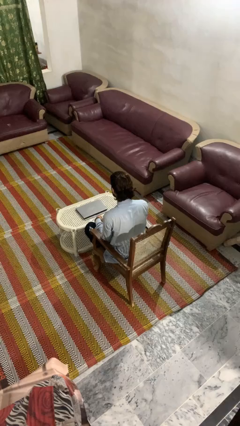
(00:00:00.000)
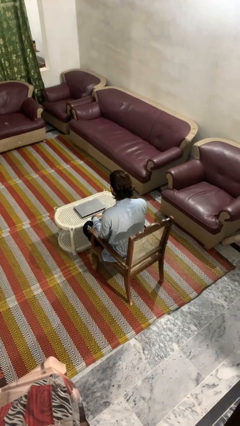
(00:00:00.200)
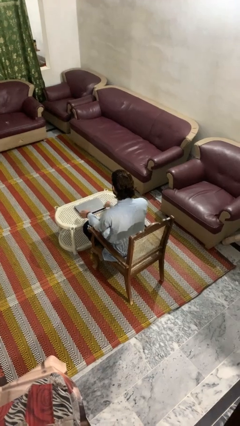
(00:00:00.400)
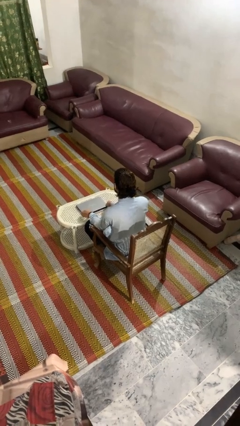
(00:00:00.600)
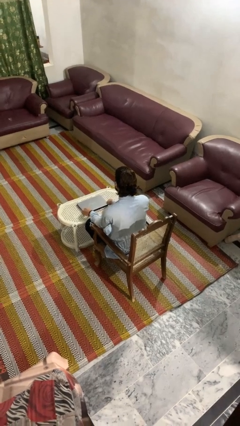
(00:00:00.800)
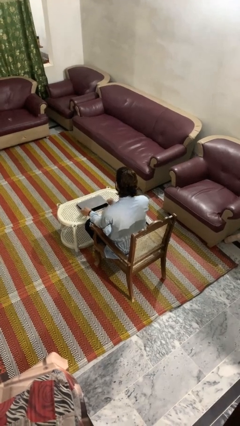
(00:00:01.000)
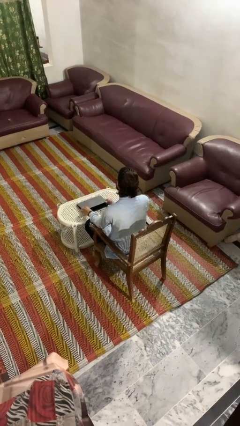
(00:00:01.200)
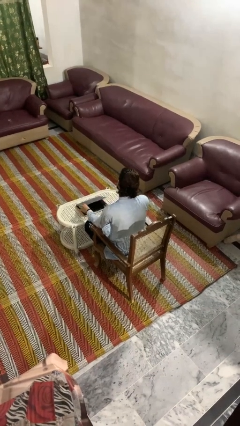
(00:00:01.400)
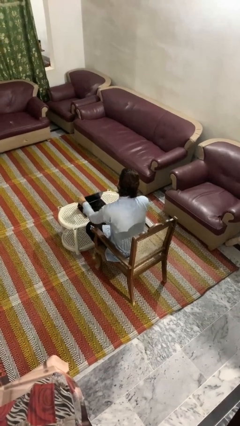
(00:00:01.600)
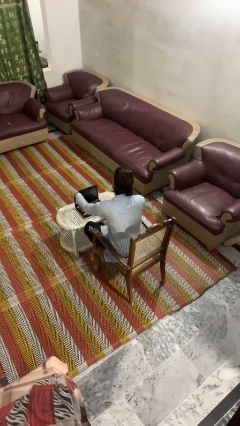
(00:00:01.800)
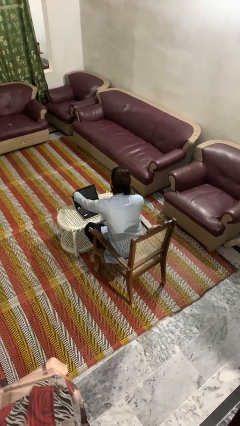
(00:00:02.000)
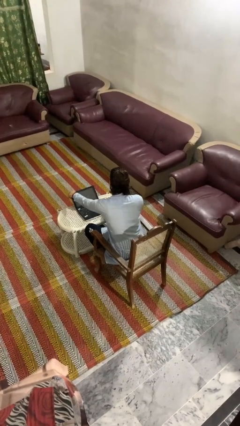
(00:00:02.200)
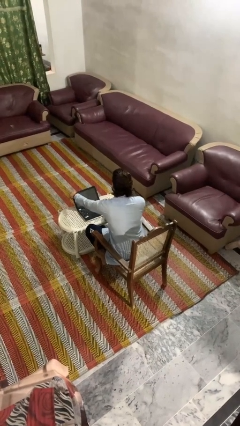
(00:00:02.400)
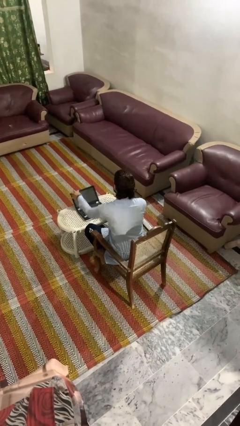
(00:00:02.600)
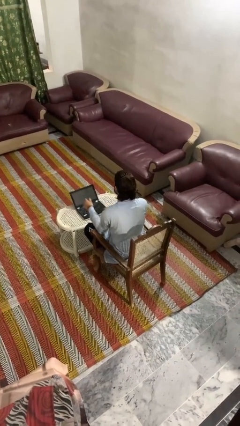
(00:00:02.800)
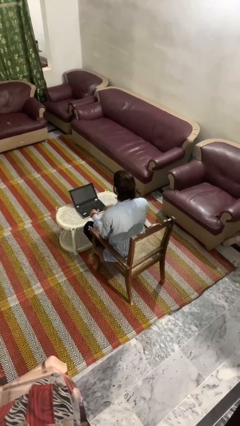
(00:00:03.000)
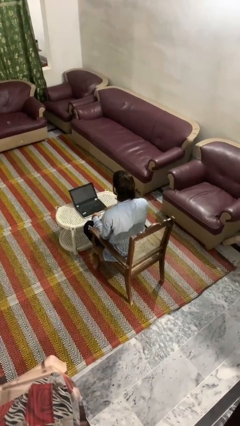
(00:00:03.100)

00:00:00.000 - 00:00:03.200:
person opens laptop

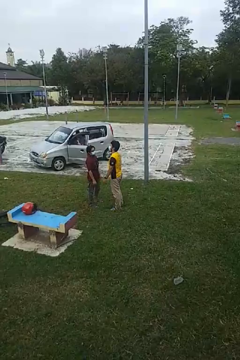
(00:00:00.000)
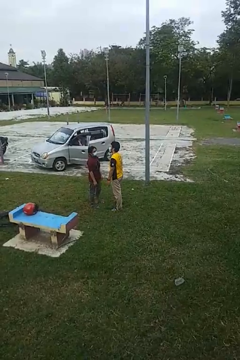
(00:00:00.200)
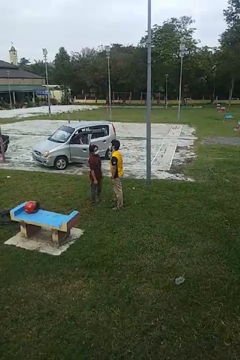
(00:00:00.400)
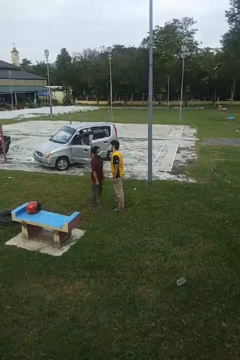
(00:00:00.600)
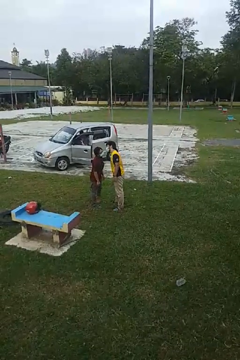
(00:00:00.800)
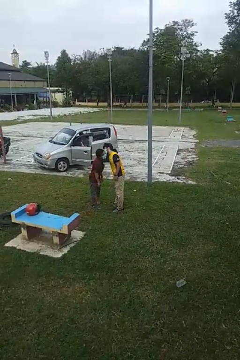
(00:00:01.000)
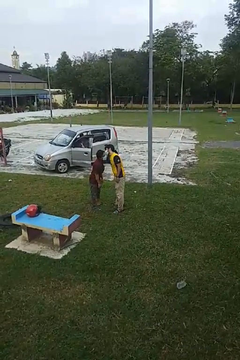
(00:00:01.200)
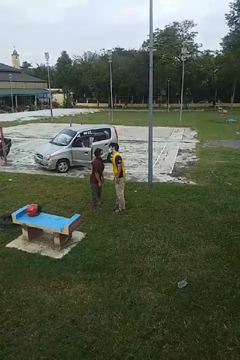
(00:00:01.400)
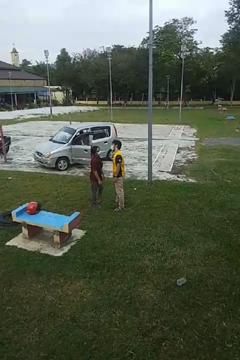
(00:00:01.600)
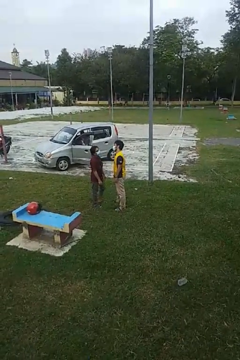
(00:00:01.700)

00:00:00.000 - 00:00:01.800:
person kisses cheek of person

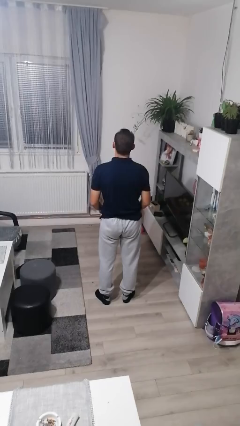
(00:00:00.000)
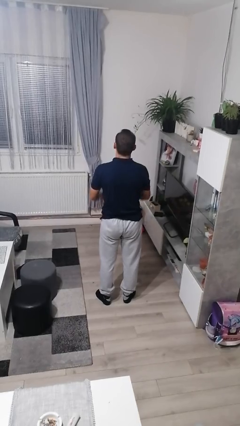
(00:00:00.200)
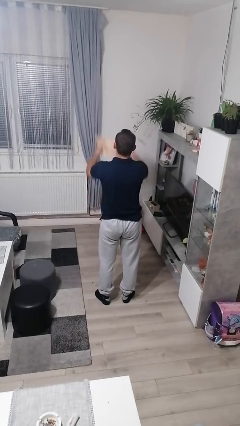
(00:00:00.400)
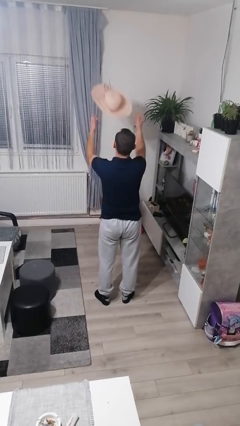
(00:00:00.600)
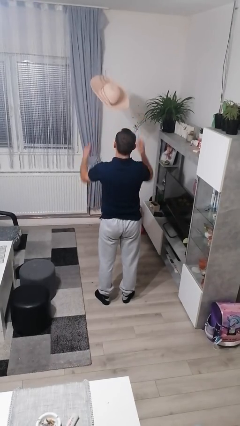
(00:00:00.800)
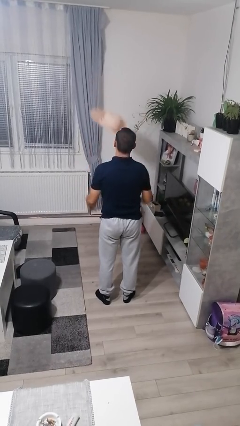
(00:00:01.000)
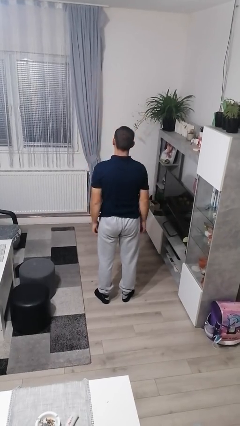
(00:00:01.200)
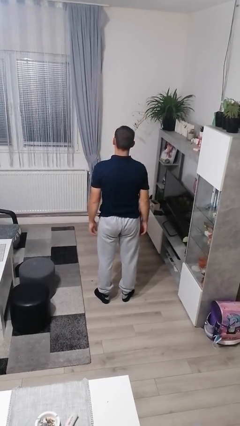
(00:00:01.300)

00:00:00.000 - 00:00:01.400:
person throws object into air

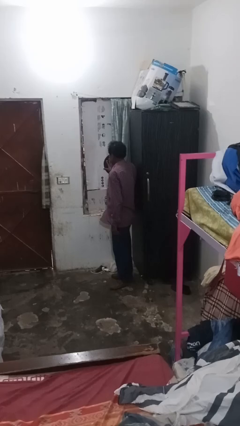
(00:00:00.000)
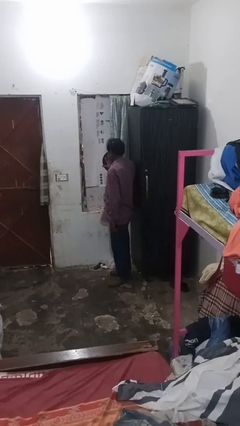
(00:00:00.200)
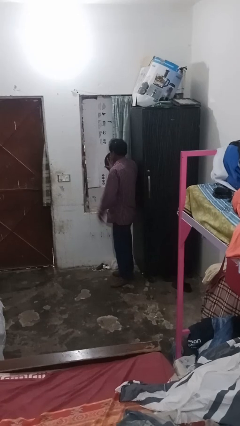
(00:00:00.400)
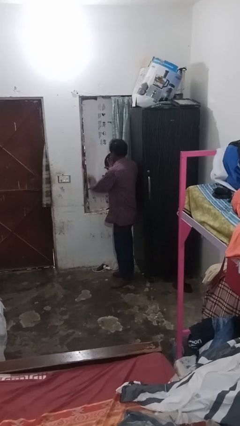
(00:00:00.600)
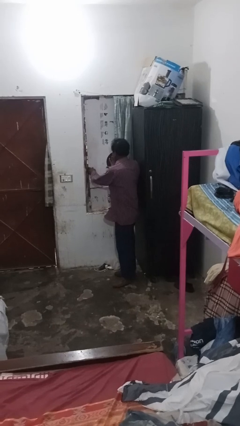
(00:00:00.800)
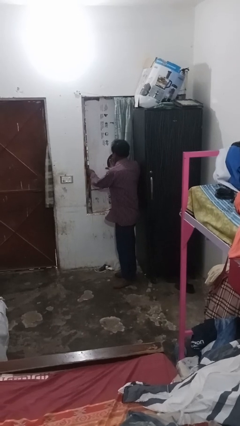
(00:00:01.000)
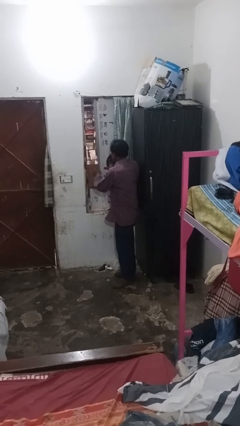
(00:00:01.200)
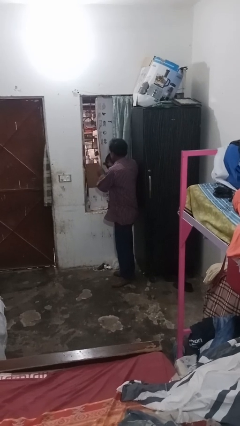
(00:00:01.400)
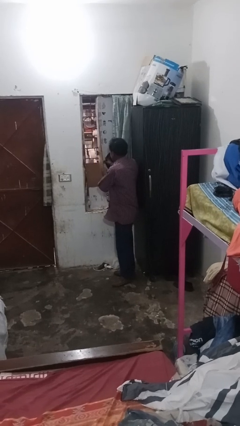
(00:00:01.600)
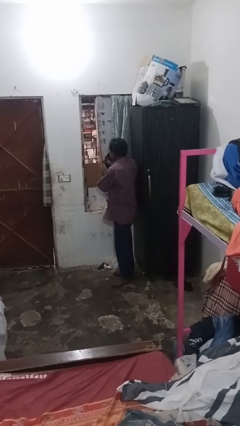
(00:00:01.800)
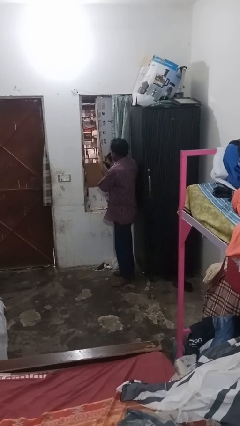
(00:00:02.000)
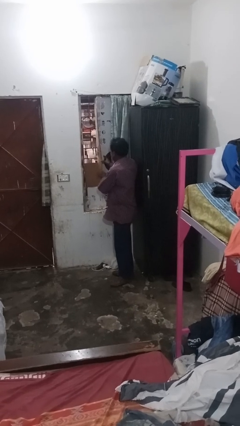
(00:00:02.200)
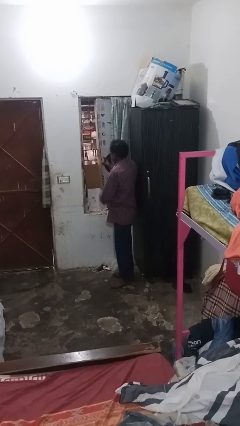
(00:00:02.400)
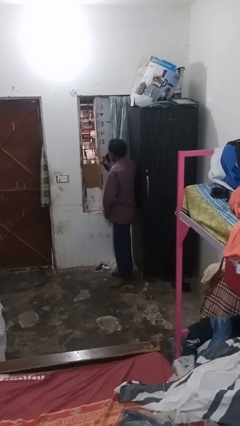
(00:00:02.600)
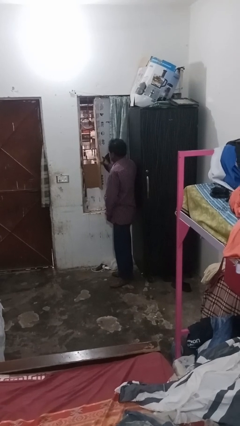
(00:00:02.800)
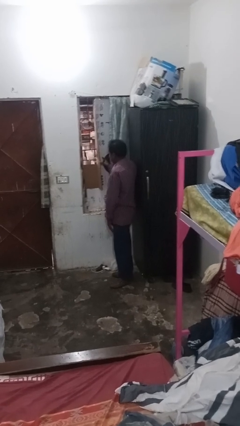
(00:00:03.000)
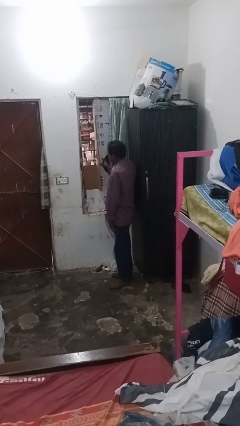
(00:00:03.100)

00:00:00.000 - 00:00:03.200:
person opens home window

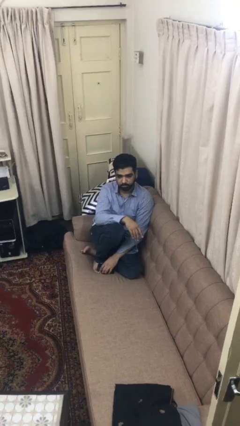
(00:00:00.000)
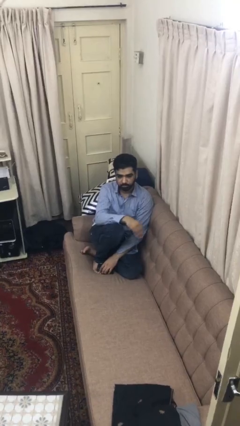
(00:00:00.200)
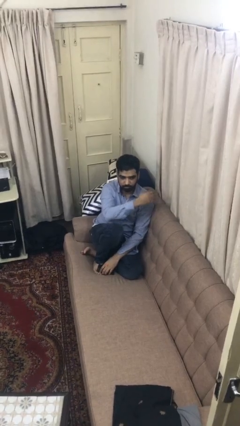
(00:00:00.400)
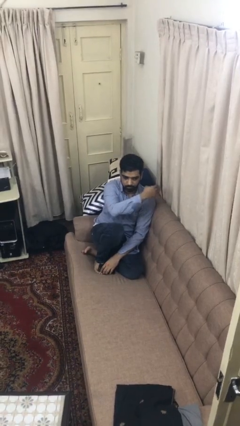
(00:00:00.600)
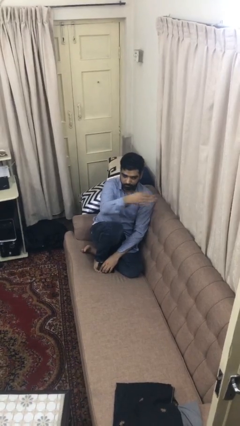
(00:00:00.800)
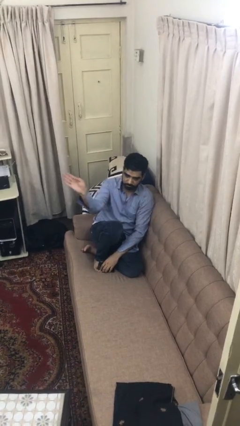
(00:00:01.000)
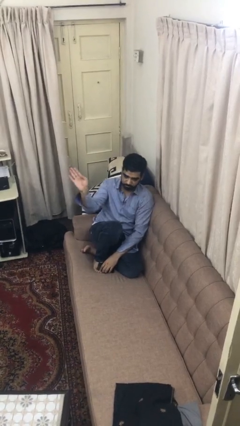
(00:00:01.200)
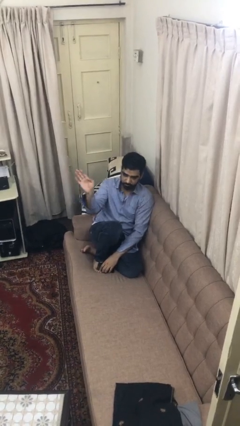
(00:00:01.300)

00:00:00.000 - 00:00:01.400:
person gestures swipe right

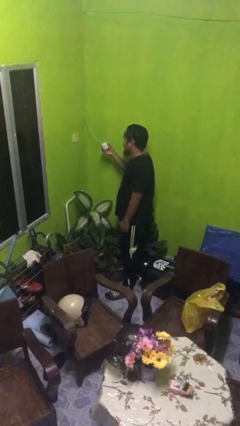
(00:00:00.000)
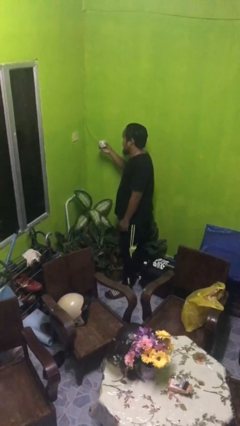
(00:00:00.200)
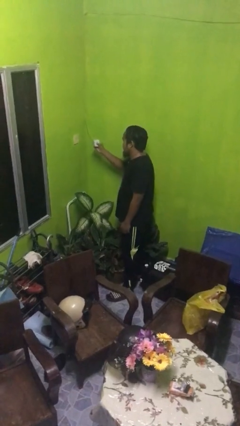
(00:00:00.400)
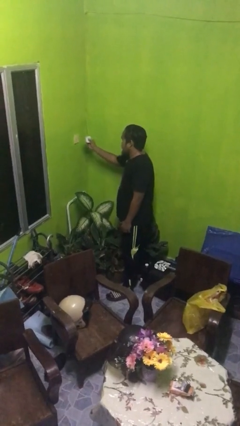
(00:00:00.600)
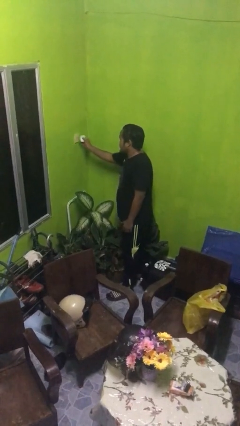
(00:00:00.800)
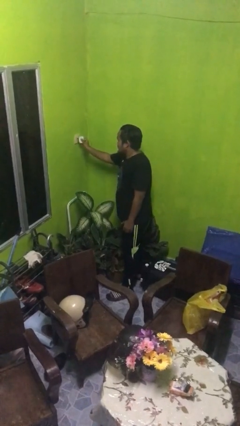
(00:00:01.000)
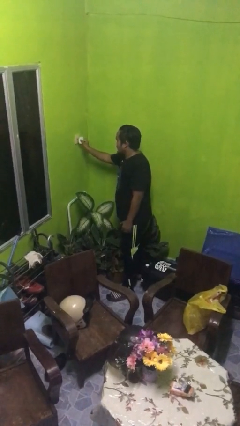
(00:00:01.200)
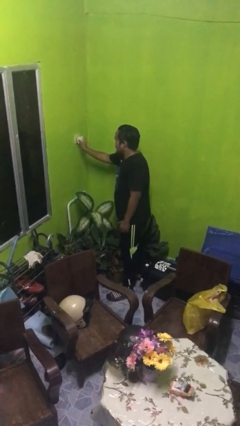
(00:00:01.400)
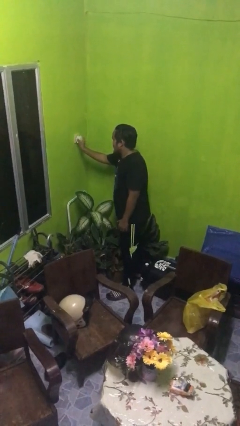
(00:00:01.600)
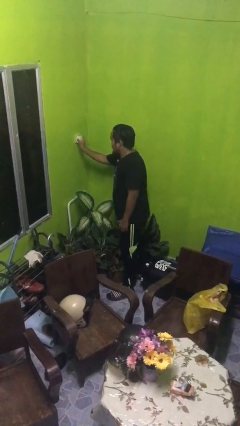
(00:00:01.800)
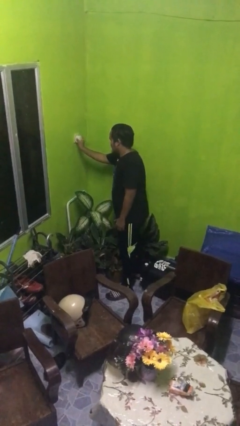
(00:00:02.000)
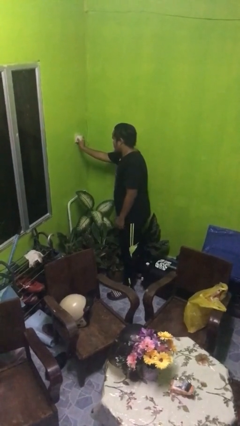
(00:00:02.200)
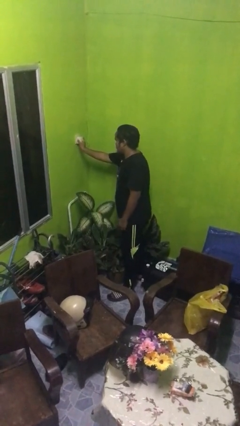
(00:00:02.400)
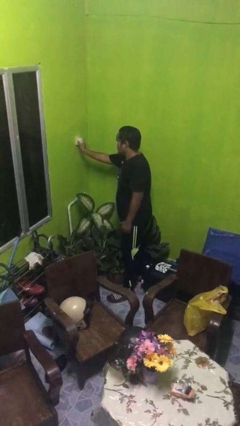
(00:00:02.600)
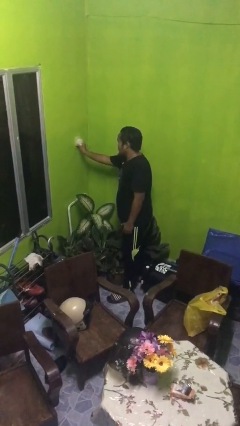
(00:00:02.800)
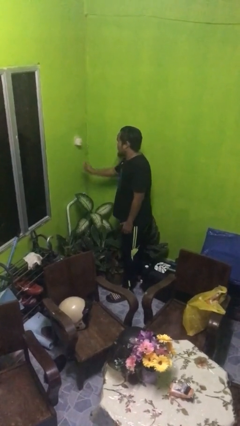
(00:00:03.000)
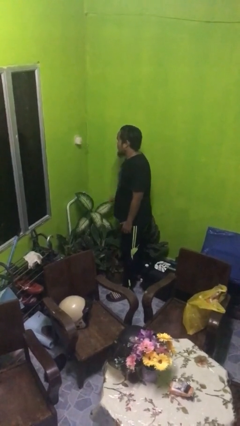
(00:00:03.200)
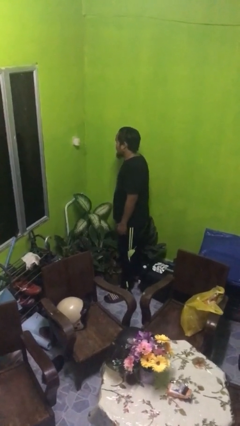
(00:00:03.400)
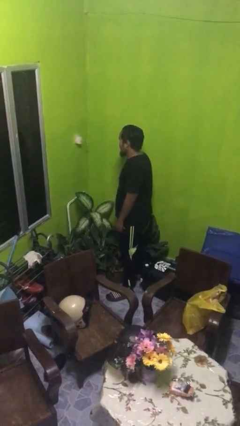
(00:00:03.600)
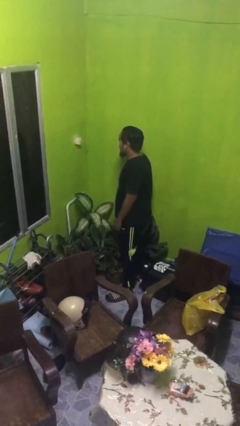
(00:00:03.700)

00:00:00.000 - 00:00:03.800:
person plugs into electrical socket

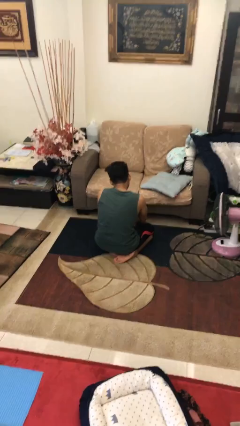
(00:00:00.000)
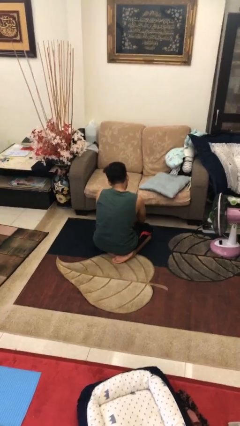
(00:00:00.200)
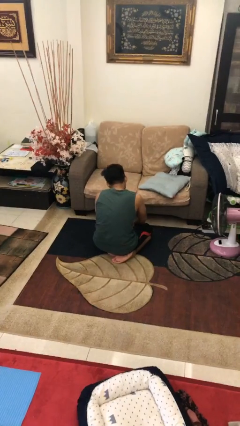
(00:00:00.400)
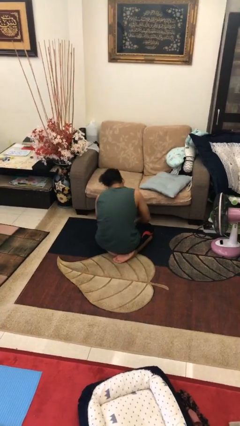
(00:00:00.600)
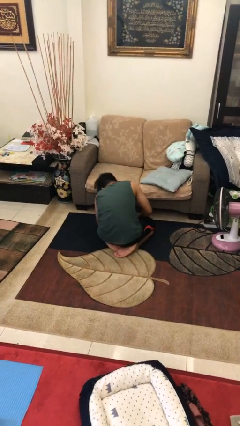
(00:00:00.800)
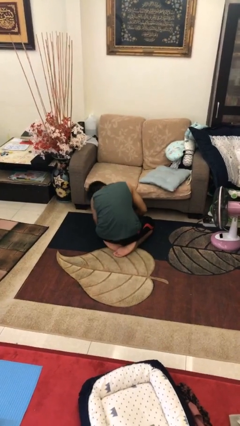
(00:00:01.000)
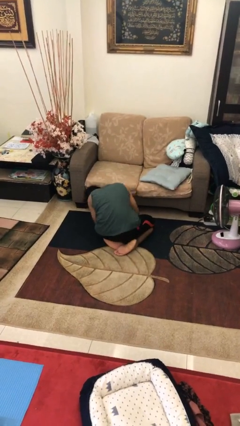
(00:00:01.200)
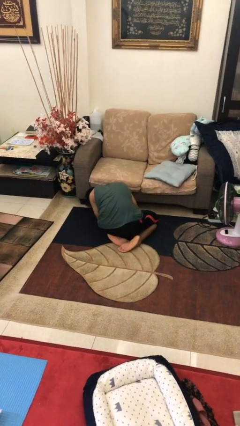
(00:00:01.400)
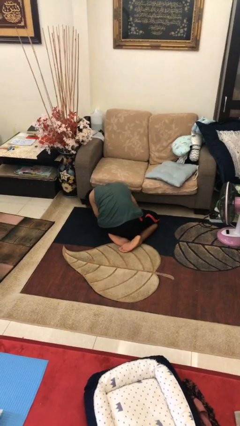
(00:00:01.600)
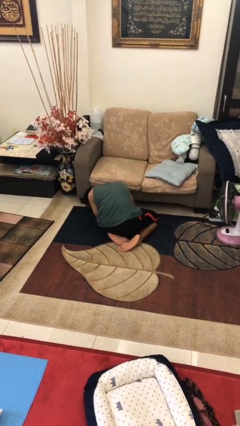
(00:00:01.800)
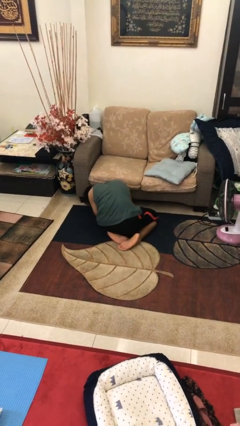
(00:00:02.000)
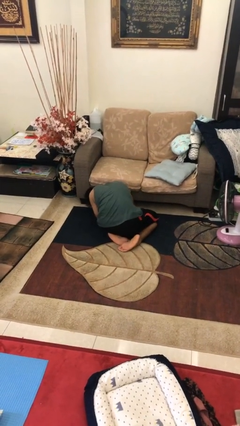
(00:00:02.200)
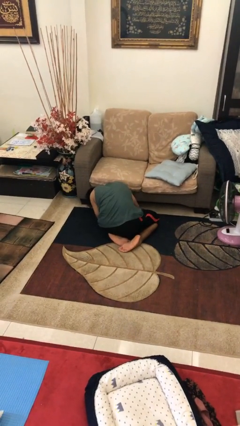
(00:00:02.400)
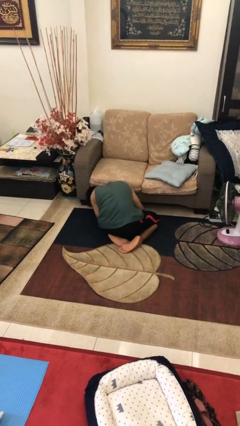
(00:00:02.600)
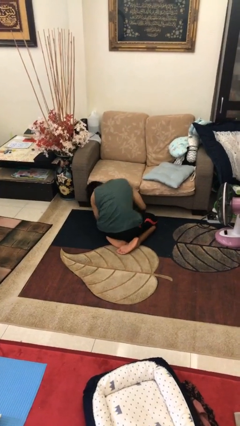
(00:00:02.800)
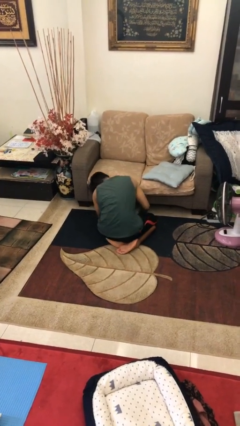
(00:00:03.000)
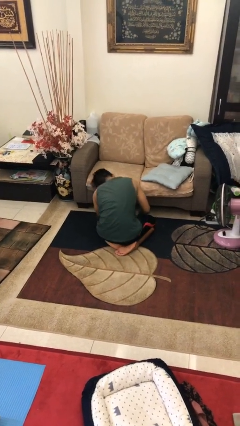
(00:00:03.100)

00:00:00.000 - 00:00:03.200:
person searches under couch
